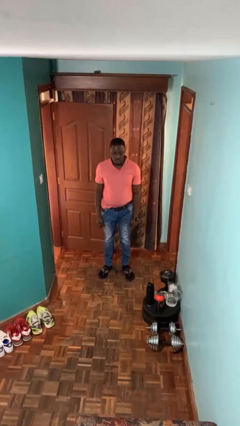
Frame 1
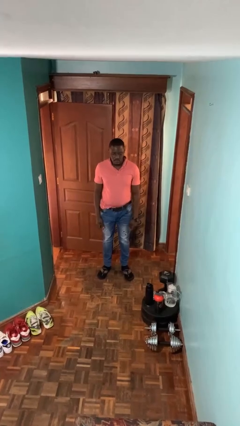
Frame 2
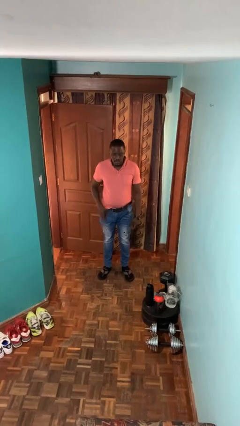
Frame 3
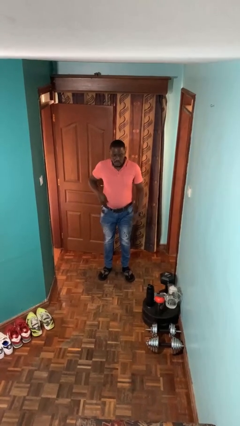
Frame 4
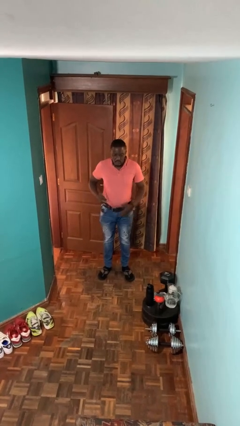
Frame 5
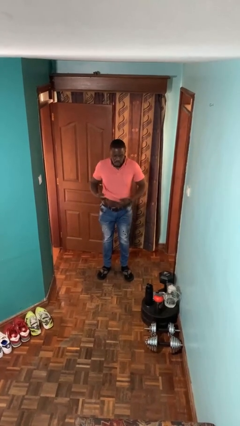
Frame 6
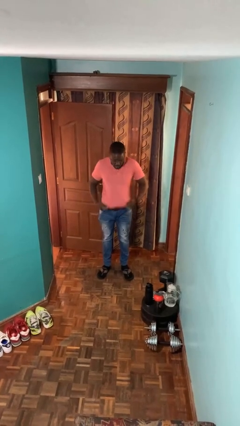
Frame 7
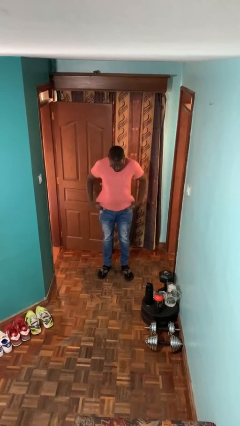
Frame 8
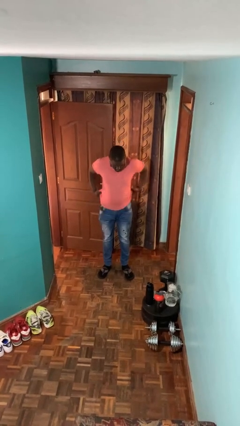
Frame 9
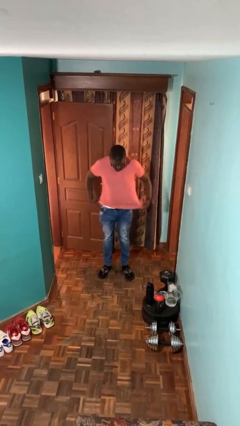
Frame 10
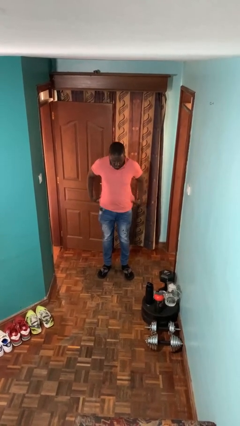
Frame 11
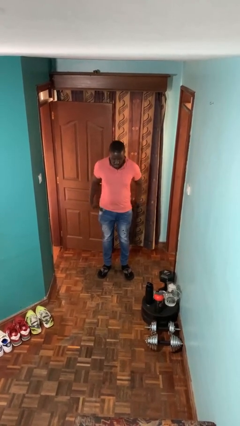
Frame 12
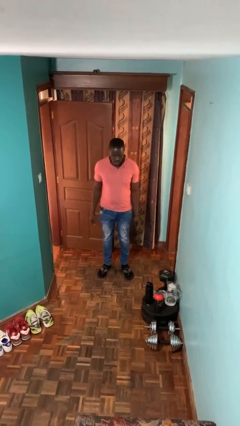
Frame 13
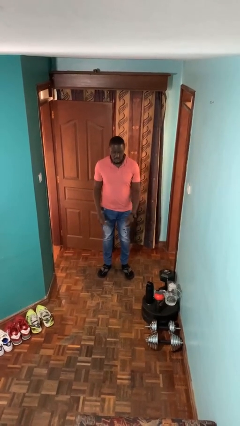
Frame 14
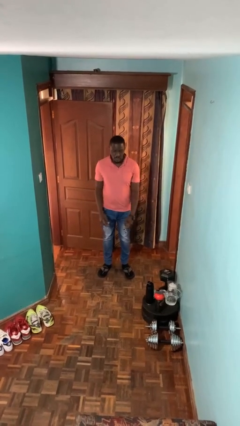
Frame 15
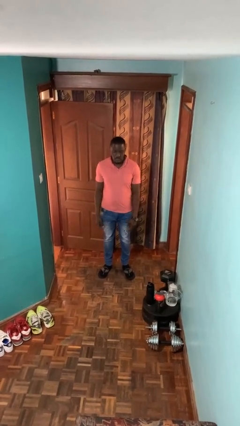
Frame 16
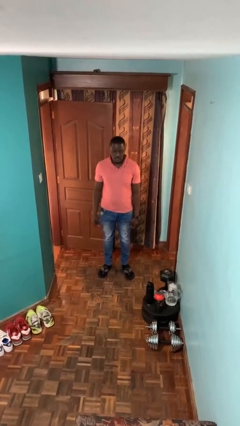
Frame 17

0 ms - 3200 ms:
person untucks shirt

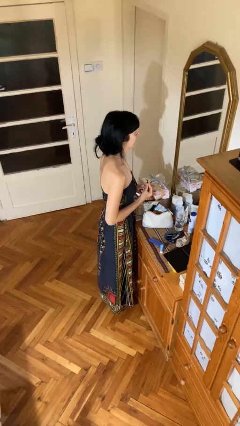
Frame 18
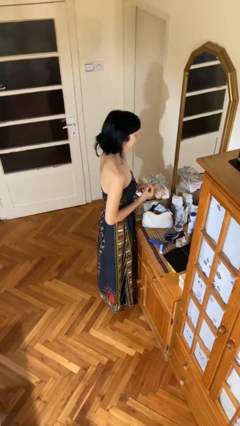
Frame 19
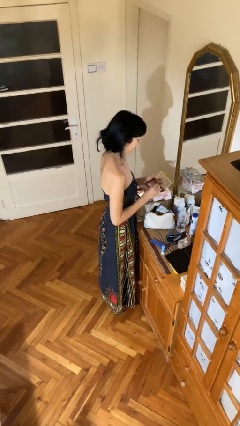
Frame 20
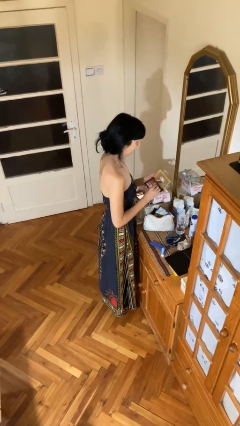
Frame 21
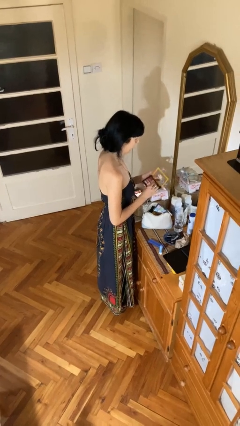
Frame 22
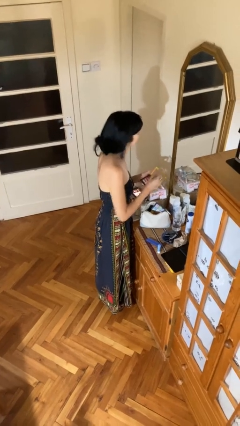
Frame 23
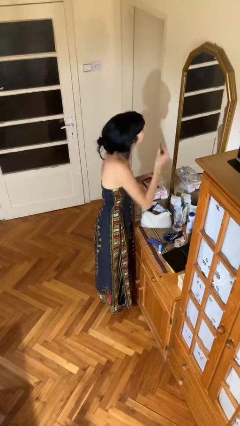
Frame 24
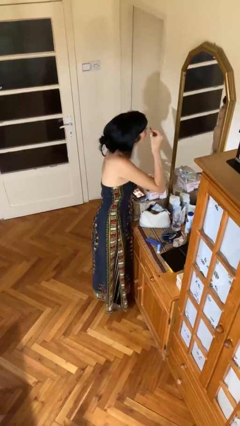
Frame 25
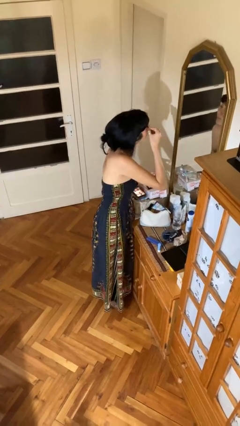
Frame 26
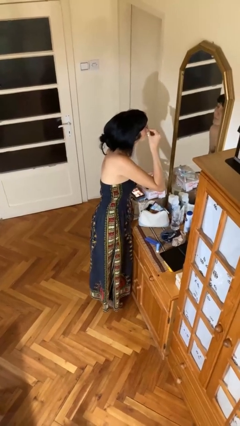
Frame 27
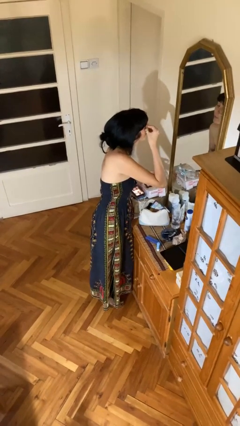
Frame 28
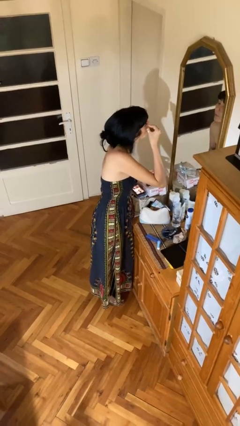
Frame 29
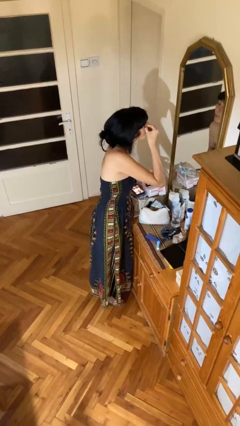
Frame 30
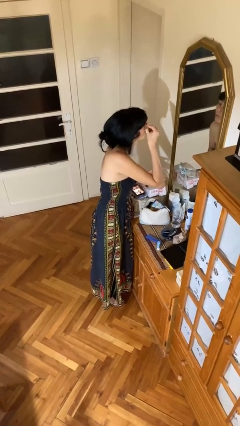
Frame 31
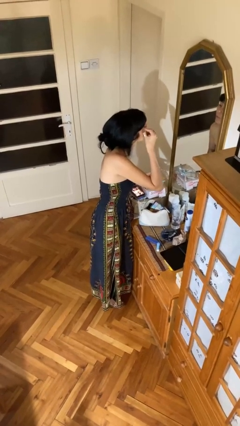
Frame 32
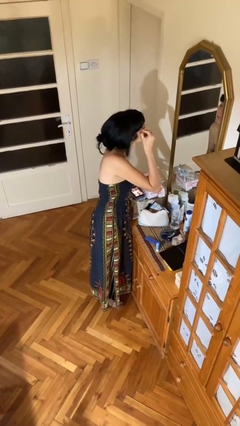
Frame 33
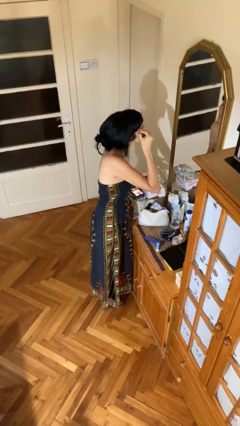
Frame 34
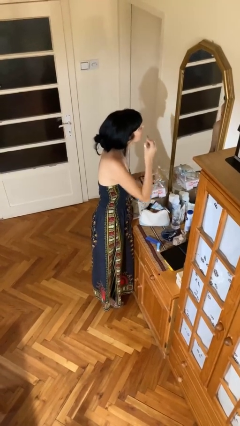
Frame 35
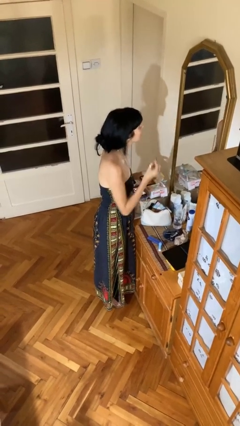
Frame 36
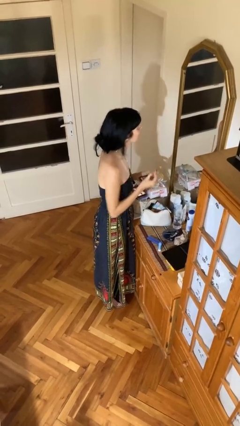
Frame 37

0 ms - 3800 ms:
person applies eye makeup

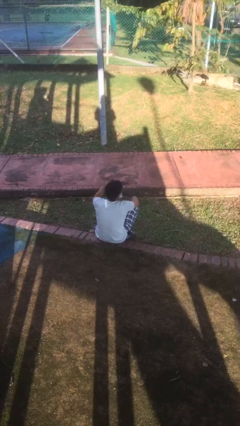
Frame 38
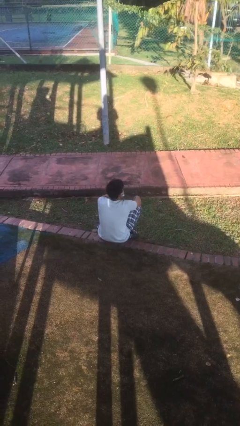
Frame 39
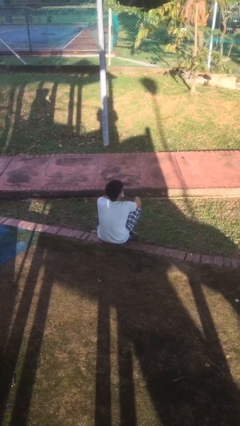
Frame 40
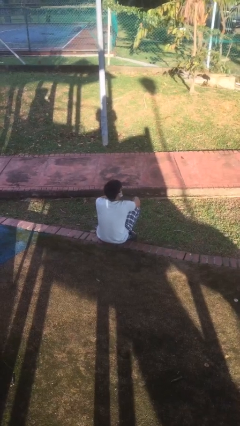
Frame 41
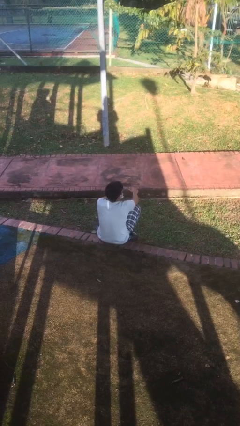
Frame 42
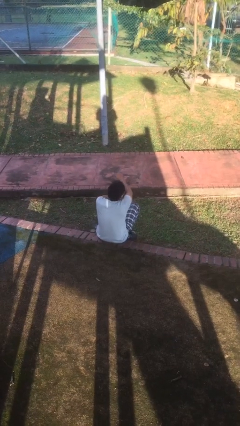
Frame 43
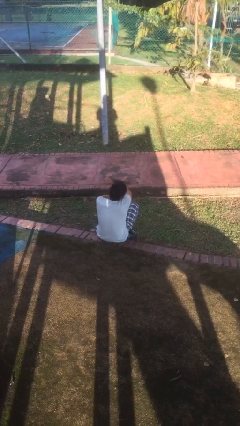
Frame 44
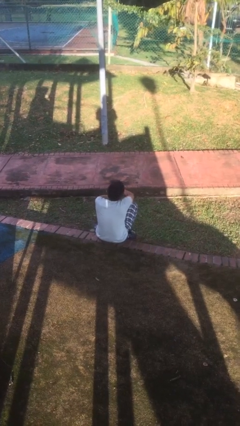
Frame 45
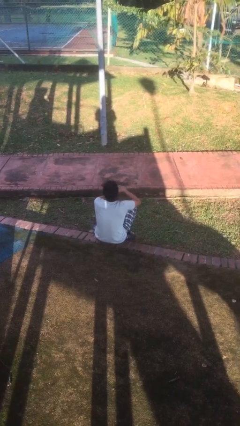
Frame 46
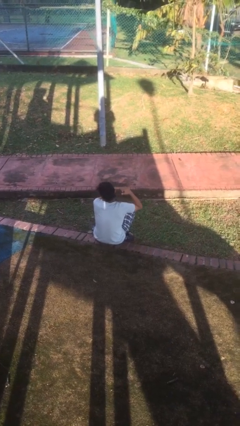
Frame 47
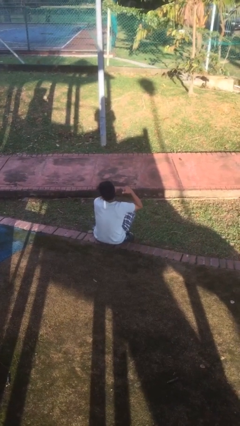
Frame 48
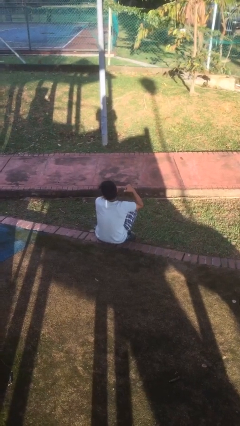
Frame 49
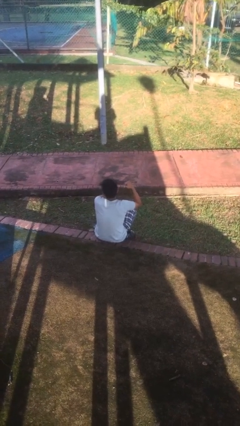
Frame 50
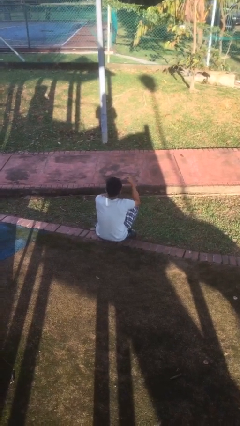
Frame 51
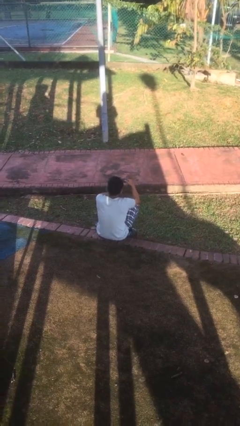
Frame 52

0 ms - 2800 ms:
person gestures cut

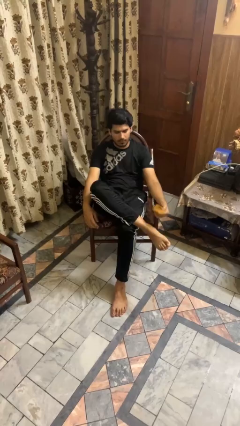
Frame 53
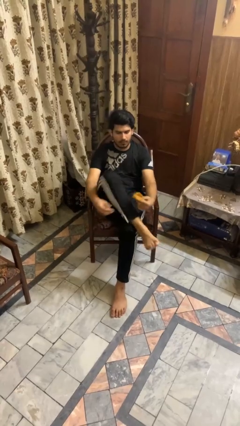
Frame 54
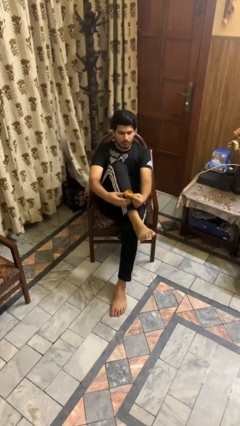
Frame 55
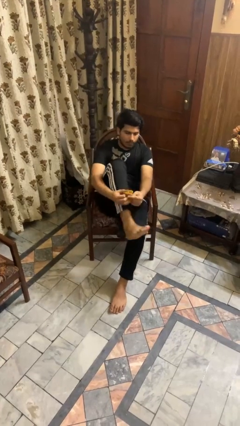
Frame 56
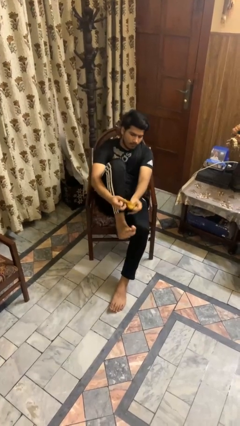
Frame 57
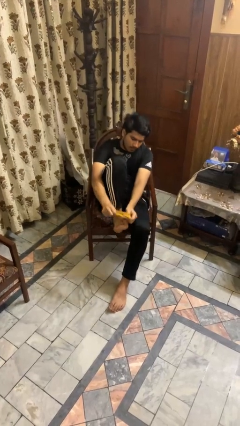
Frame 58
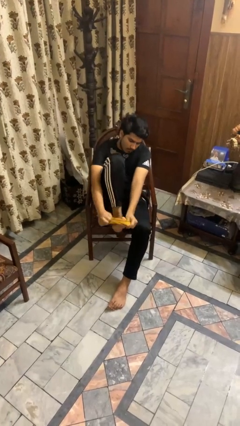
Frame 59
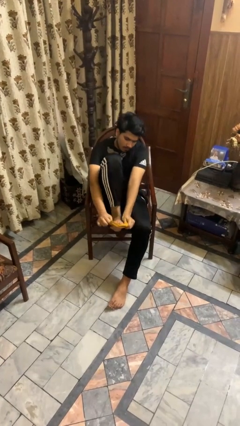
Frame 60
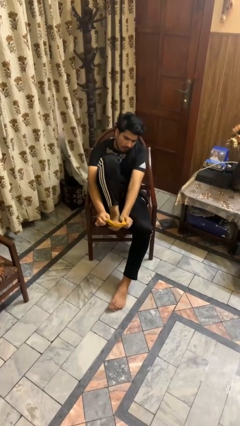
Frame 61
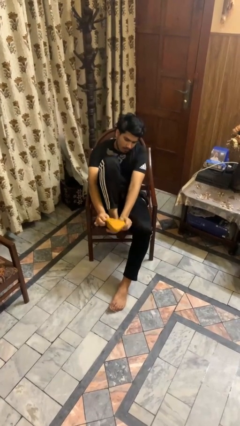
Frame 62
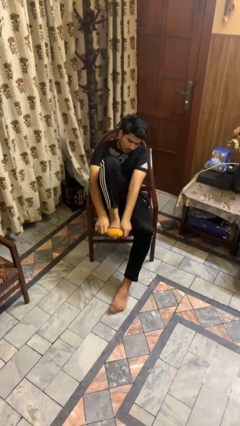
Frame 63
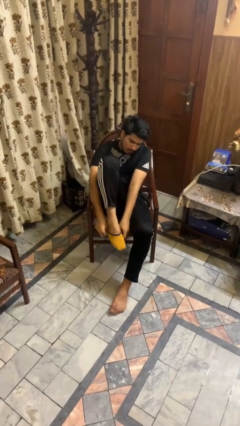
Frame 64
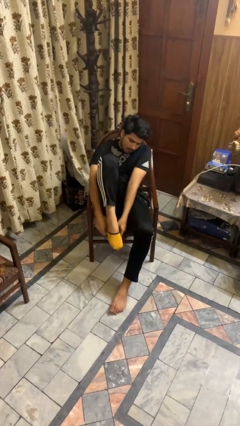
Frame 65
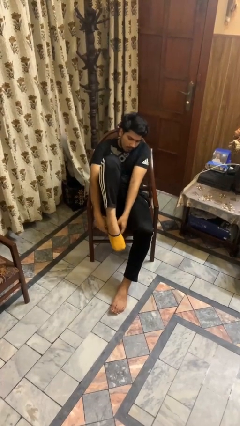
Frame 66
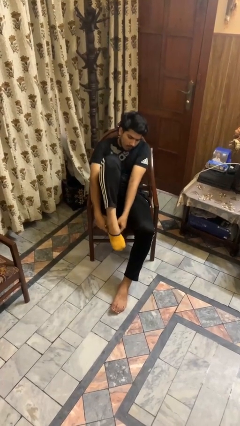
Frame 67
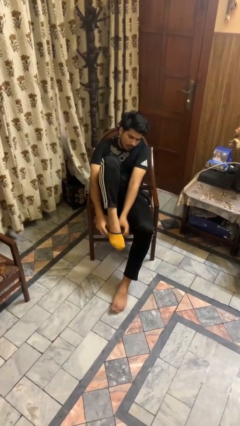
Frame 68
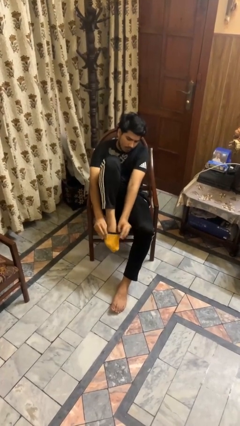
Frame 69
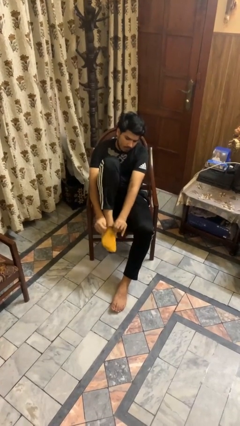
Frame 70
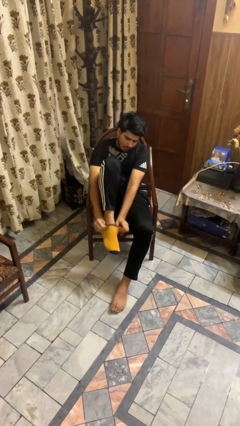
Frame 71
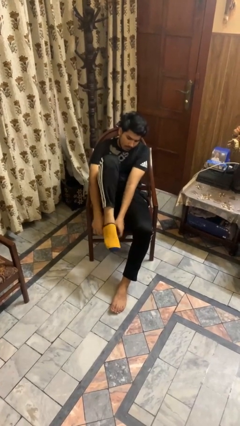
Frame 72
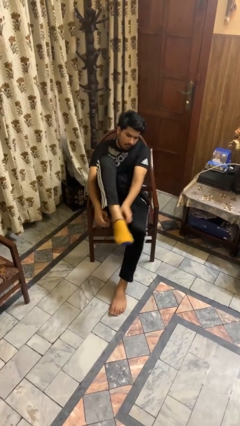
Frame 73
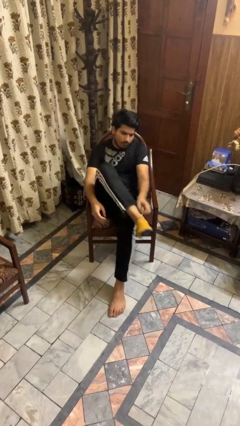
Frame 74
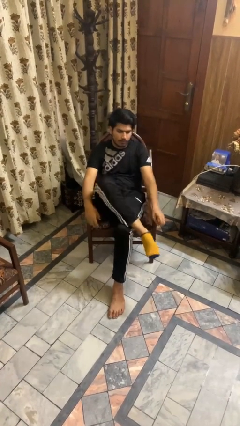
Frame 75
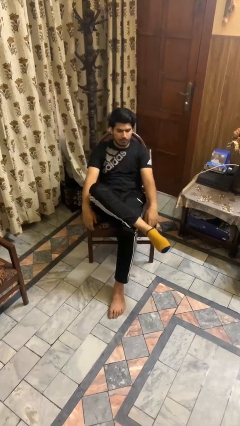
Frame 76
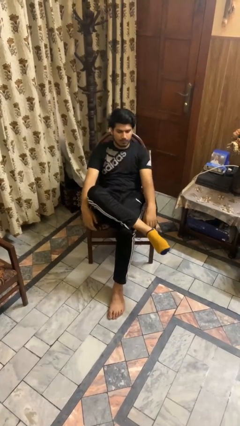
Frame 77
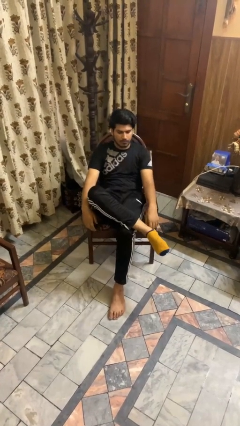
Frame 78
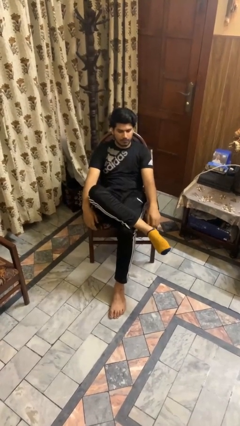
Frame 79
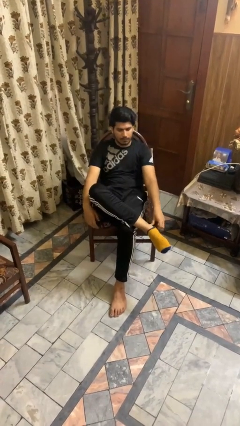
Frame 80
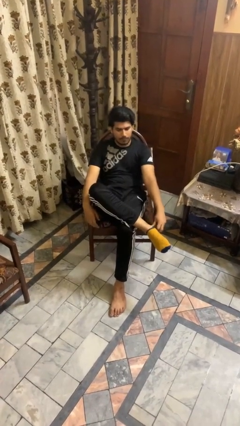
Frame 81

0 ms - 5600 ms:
person puts on socks

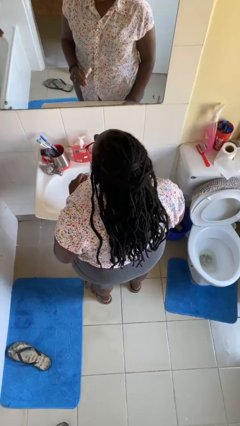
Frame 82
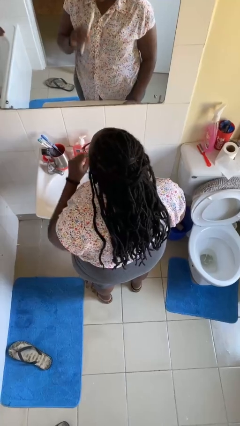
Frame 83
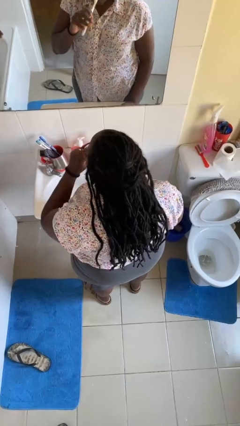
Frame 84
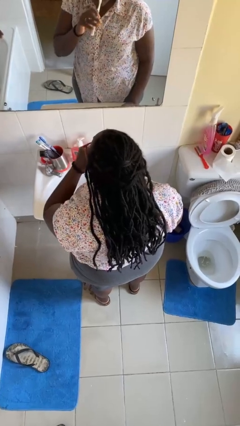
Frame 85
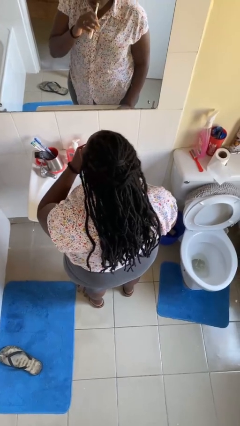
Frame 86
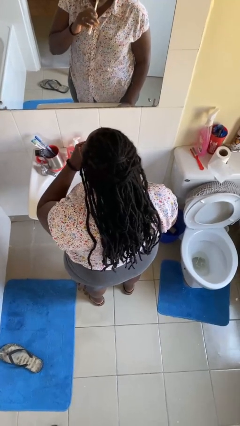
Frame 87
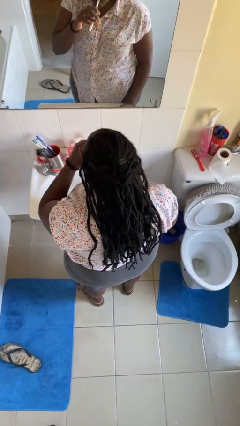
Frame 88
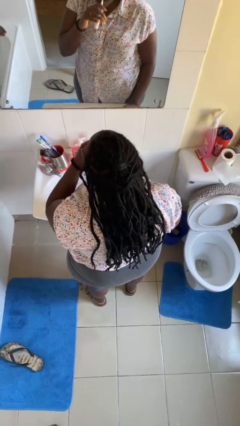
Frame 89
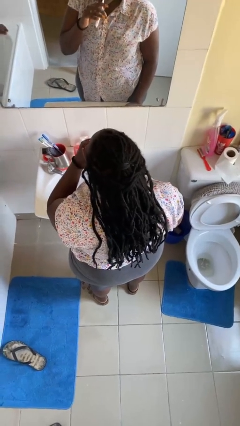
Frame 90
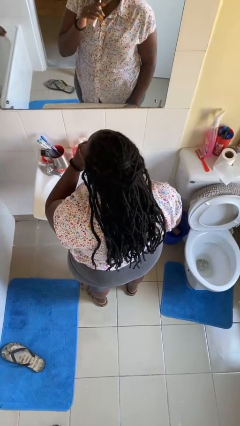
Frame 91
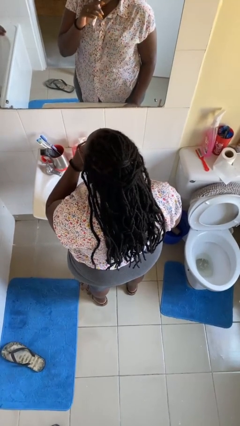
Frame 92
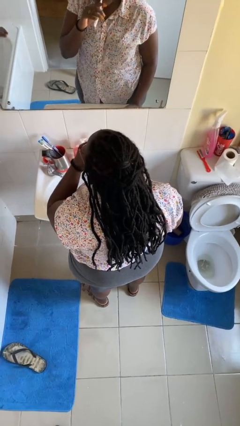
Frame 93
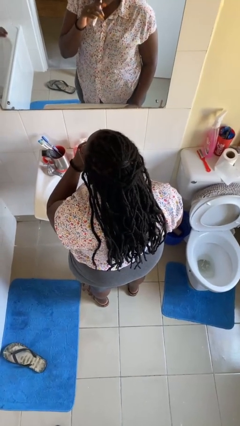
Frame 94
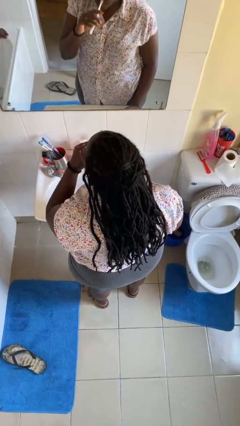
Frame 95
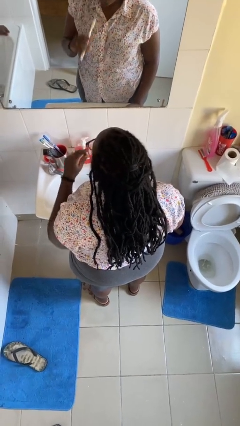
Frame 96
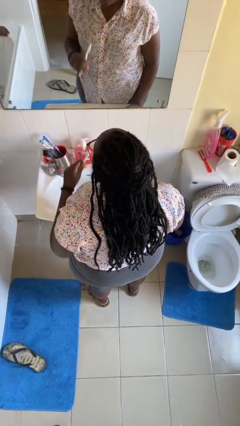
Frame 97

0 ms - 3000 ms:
person brushes teeth
